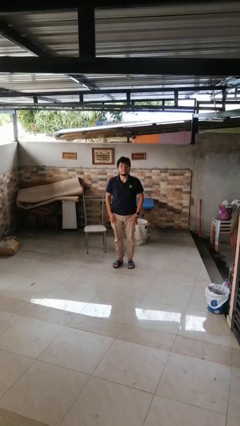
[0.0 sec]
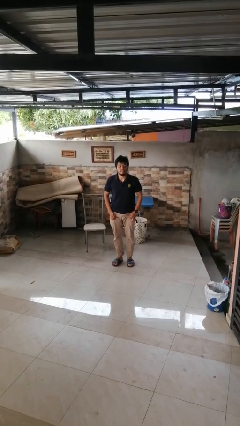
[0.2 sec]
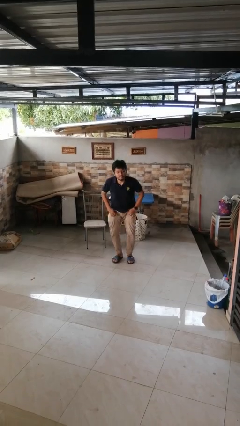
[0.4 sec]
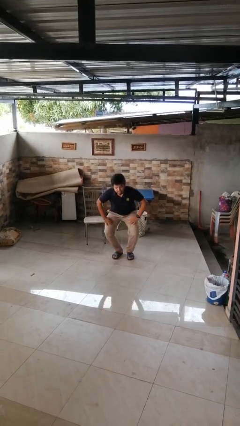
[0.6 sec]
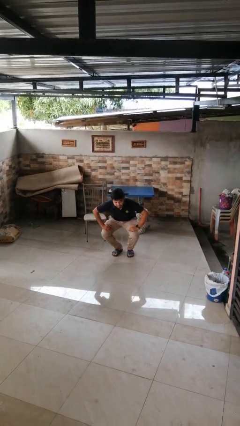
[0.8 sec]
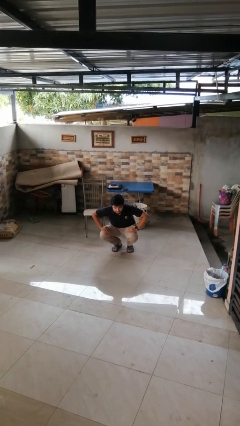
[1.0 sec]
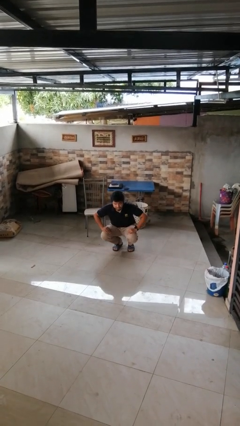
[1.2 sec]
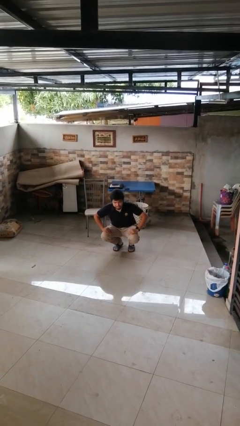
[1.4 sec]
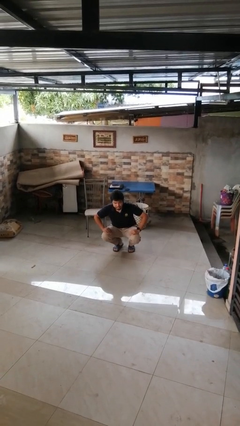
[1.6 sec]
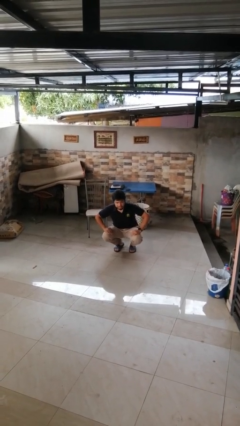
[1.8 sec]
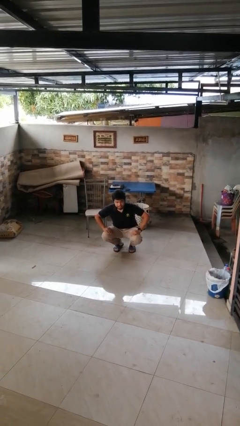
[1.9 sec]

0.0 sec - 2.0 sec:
person squats

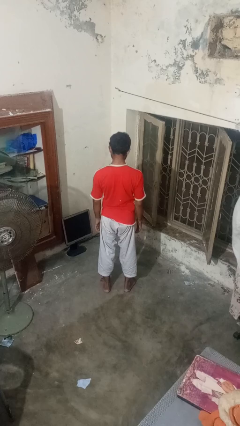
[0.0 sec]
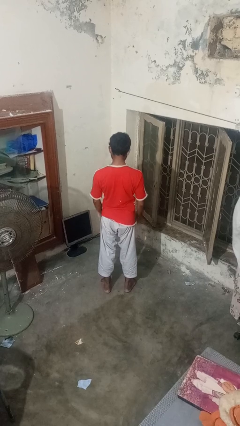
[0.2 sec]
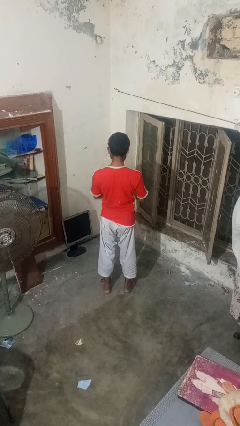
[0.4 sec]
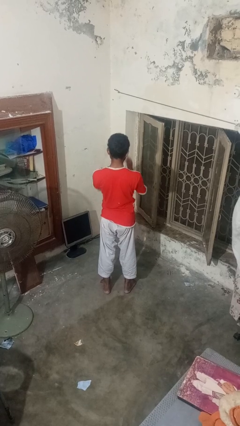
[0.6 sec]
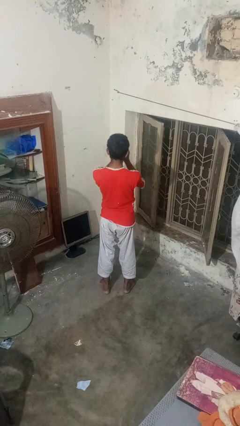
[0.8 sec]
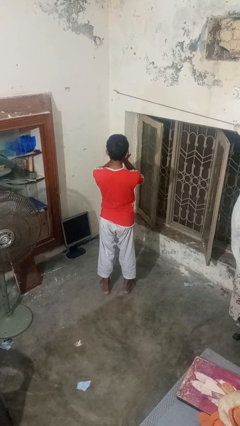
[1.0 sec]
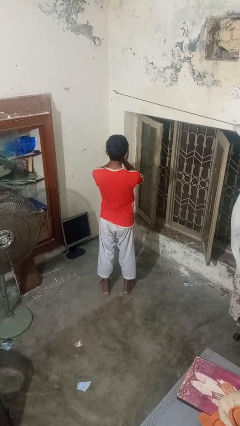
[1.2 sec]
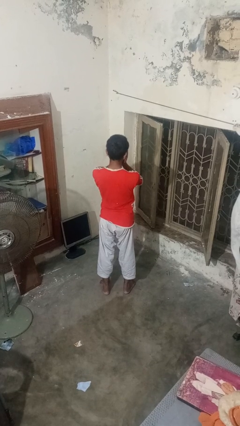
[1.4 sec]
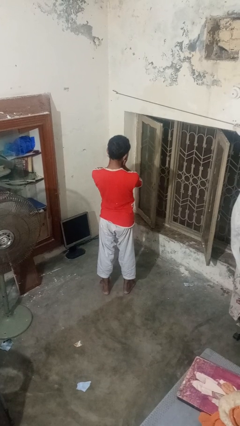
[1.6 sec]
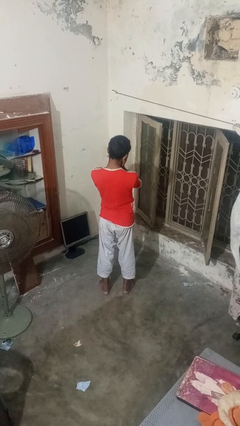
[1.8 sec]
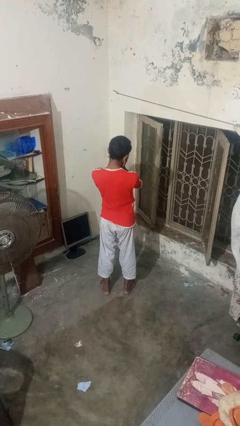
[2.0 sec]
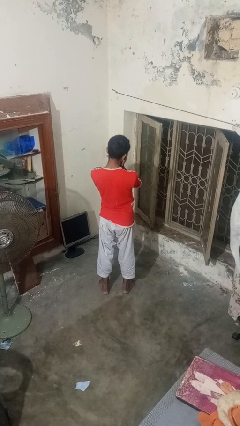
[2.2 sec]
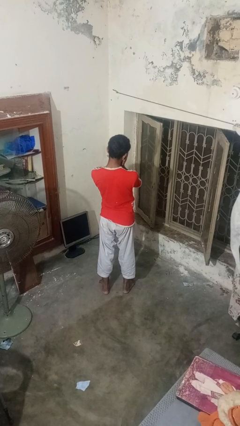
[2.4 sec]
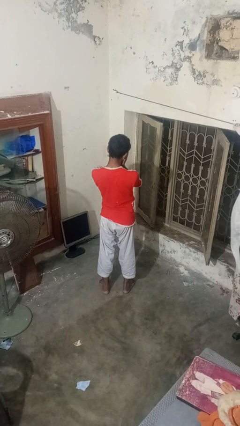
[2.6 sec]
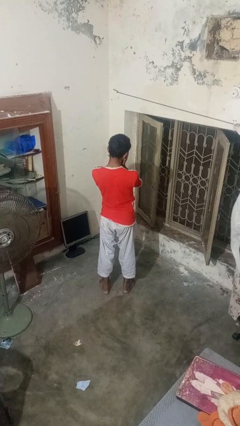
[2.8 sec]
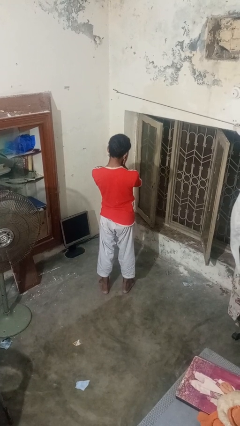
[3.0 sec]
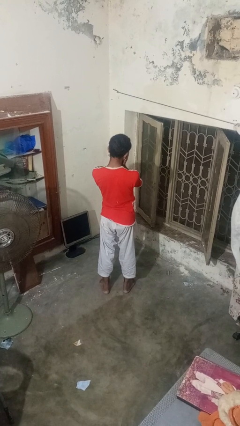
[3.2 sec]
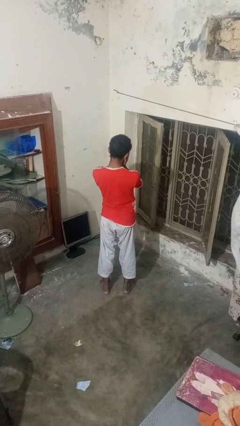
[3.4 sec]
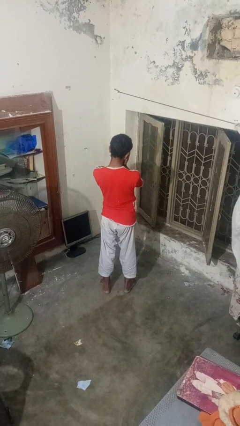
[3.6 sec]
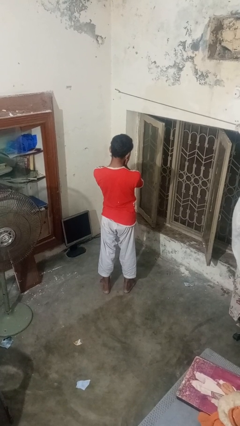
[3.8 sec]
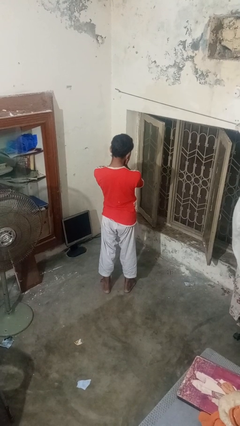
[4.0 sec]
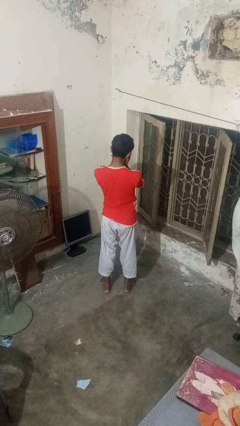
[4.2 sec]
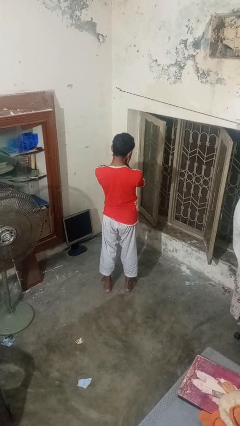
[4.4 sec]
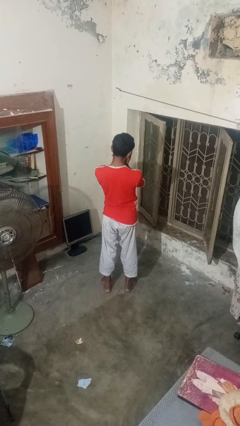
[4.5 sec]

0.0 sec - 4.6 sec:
person covers face with hands

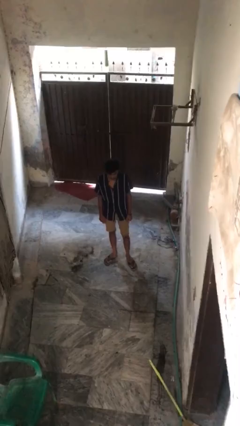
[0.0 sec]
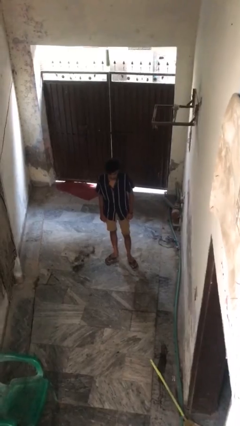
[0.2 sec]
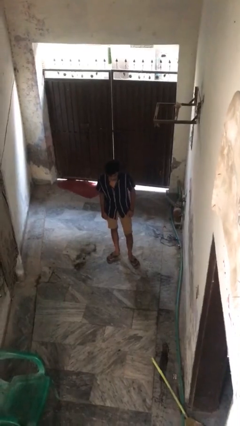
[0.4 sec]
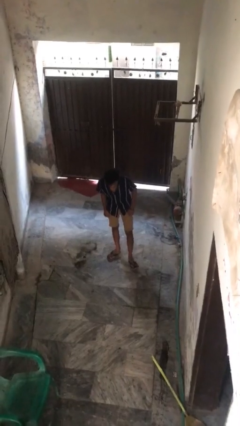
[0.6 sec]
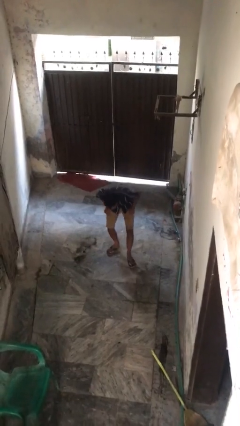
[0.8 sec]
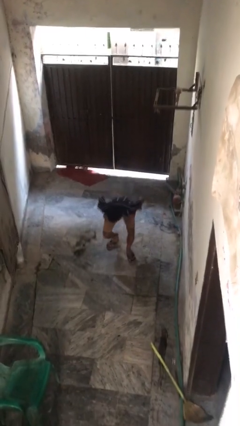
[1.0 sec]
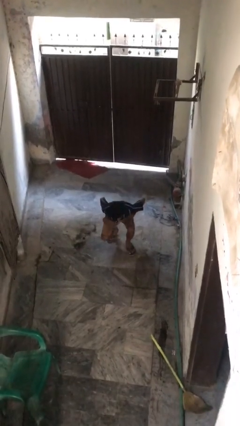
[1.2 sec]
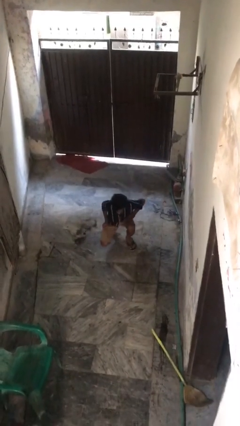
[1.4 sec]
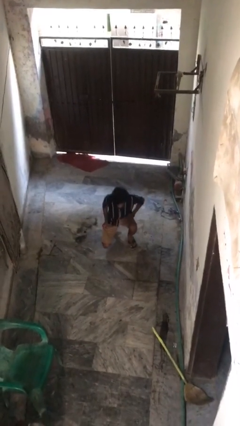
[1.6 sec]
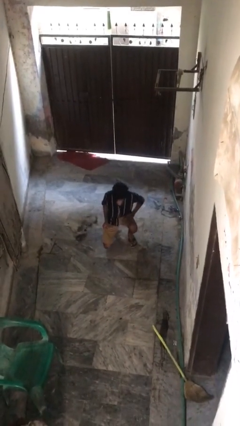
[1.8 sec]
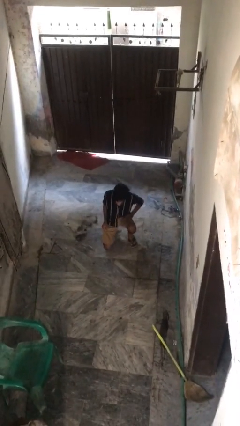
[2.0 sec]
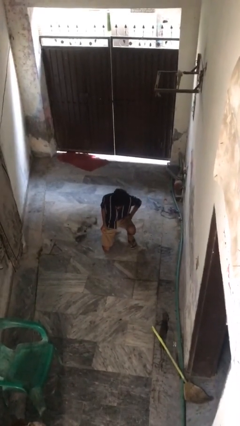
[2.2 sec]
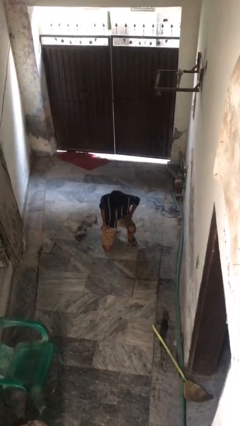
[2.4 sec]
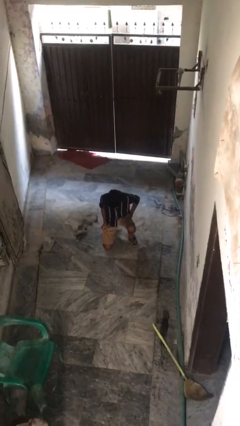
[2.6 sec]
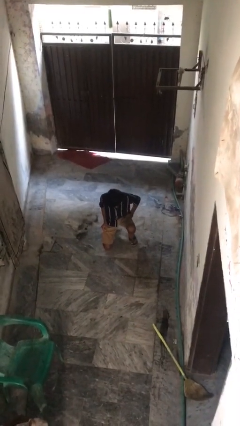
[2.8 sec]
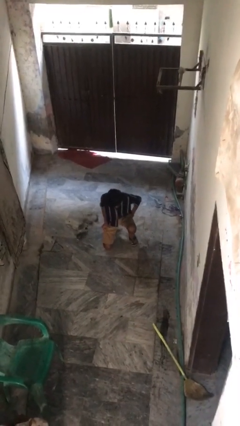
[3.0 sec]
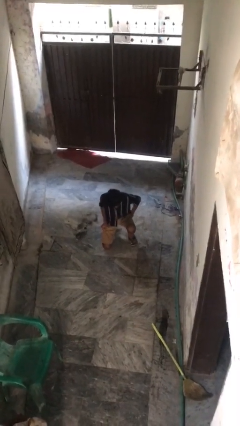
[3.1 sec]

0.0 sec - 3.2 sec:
person kneels

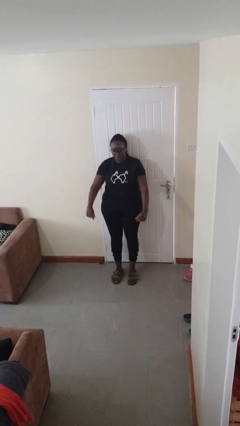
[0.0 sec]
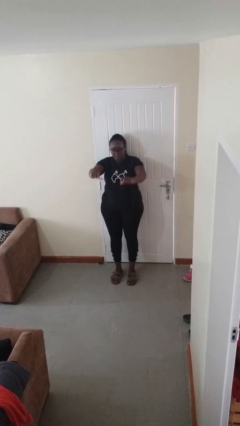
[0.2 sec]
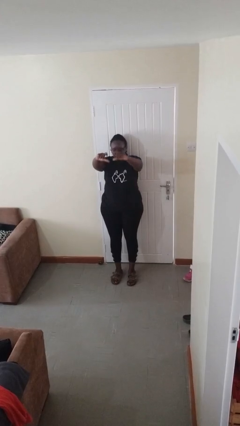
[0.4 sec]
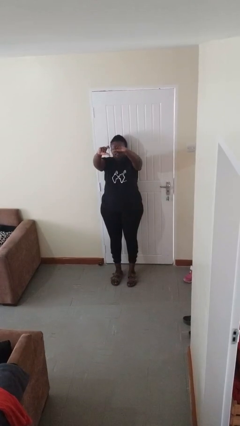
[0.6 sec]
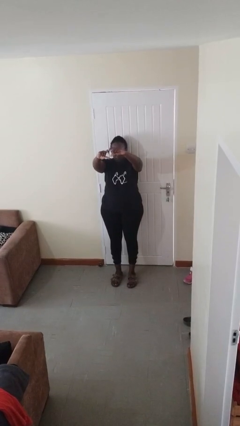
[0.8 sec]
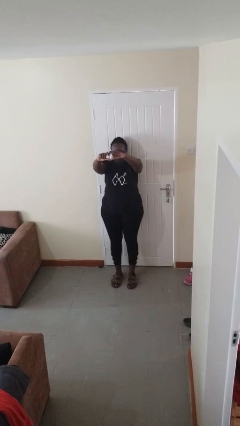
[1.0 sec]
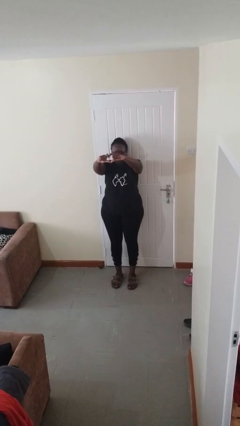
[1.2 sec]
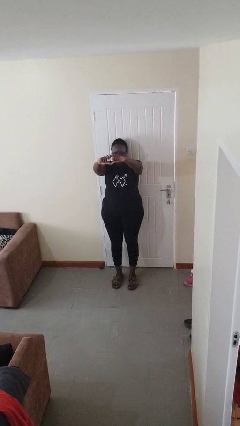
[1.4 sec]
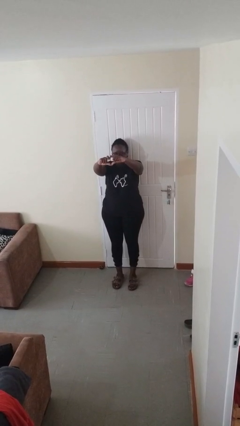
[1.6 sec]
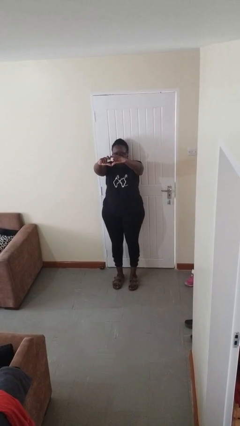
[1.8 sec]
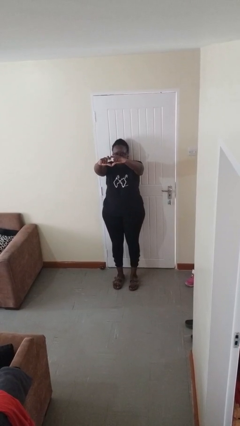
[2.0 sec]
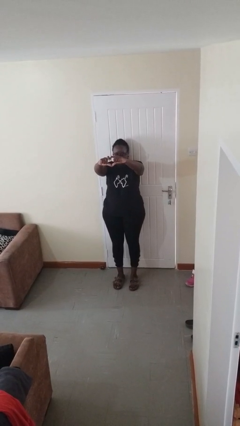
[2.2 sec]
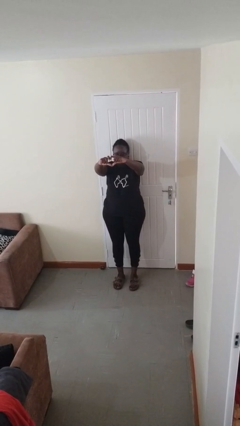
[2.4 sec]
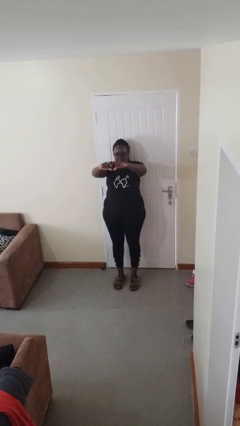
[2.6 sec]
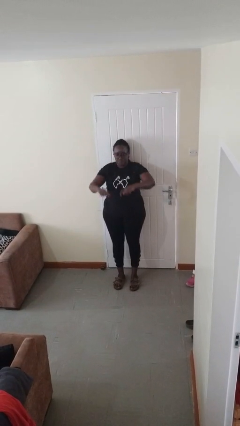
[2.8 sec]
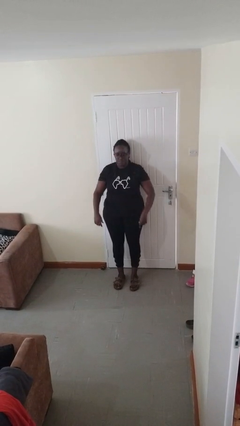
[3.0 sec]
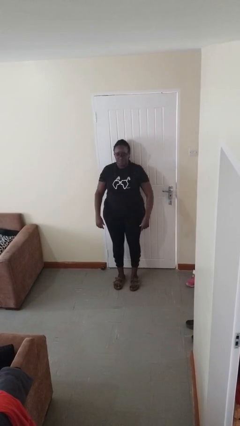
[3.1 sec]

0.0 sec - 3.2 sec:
person gestures heart

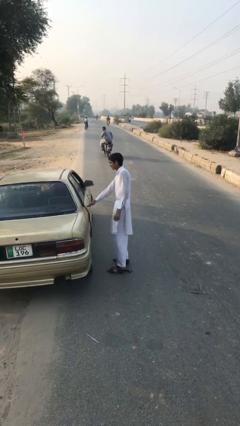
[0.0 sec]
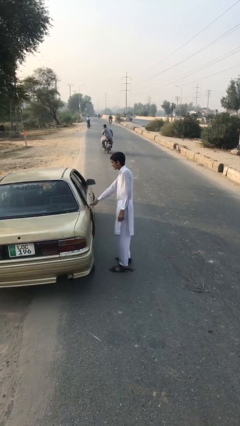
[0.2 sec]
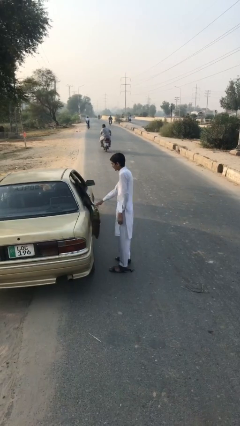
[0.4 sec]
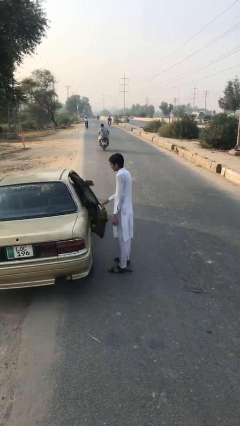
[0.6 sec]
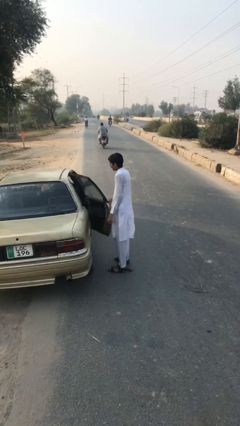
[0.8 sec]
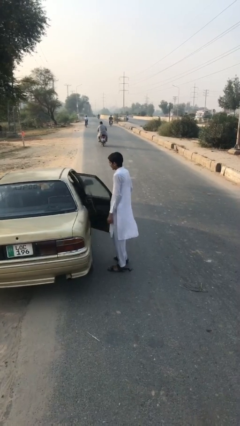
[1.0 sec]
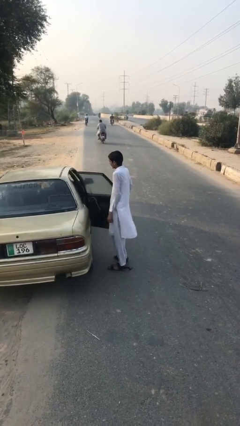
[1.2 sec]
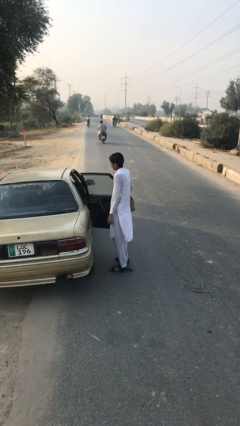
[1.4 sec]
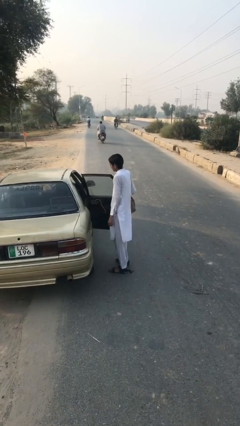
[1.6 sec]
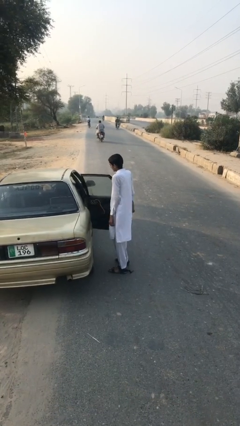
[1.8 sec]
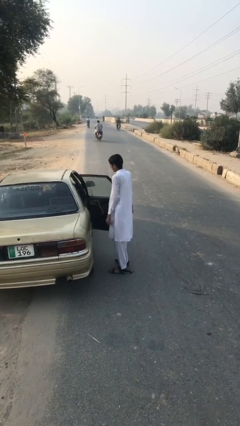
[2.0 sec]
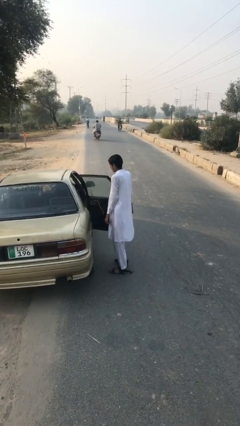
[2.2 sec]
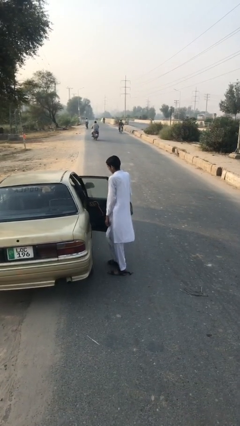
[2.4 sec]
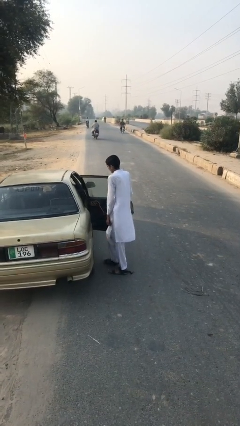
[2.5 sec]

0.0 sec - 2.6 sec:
person opens car door

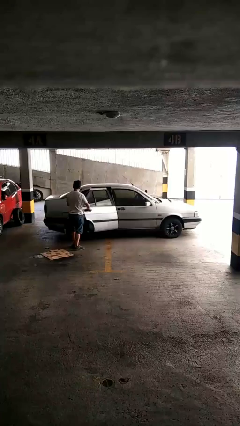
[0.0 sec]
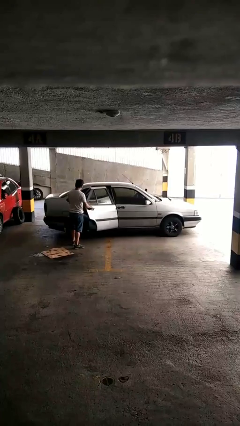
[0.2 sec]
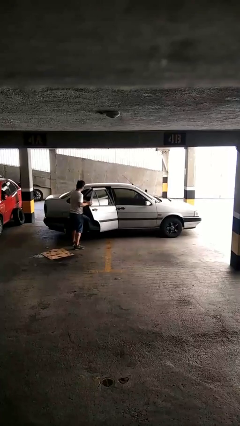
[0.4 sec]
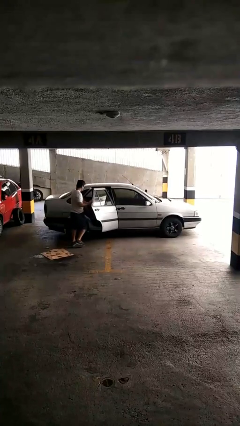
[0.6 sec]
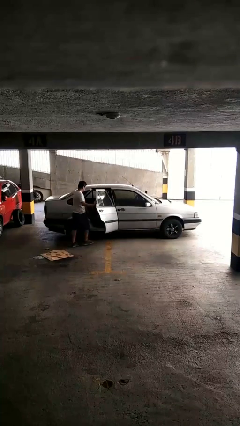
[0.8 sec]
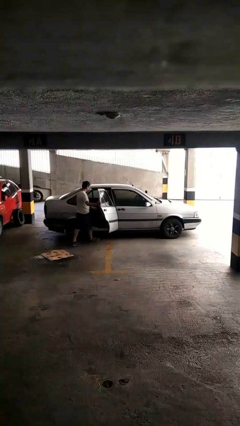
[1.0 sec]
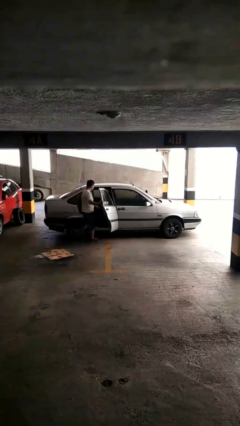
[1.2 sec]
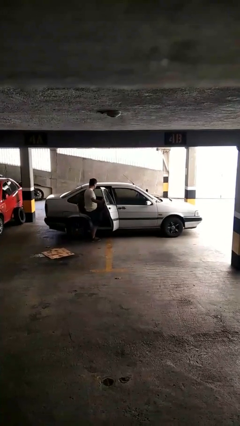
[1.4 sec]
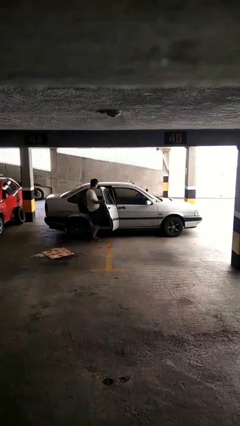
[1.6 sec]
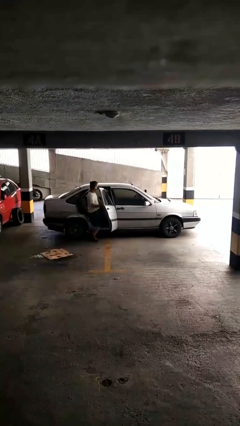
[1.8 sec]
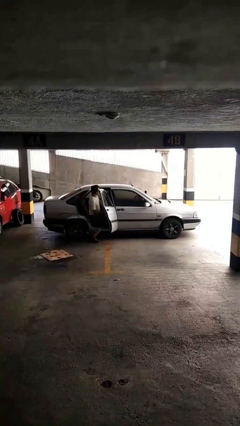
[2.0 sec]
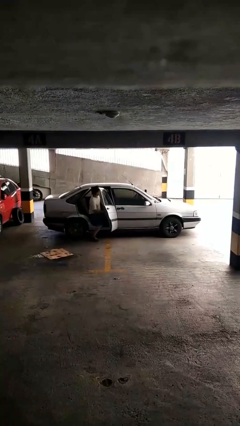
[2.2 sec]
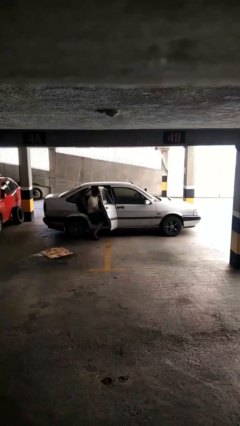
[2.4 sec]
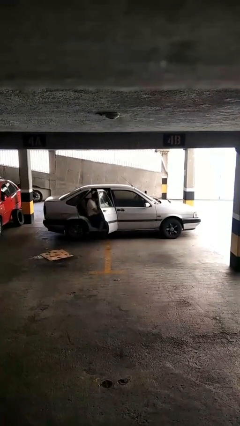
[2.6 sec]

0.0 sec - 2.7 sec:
car picks up person
